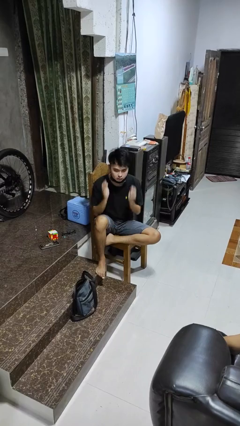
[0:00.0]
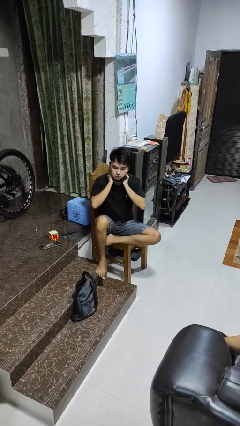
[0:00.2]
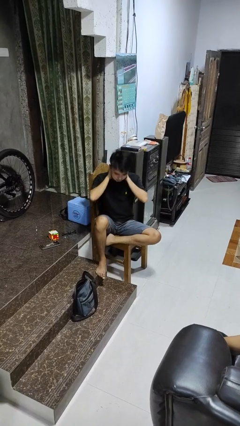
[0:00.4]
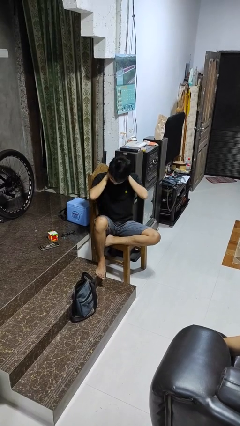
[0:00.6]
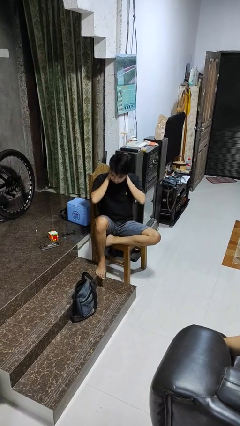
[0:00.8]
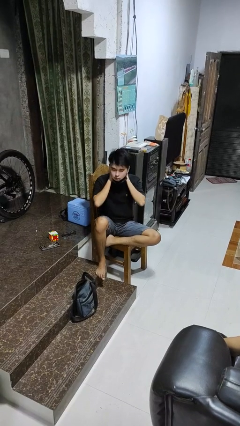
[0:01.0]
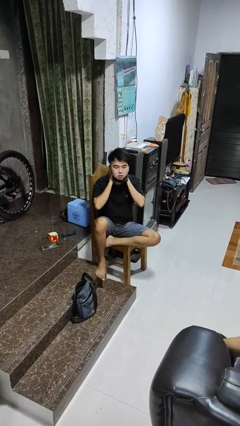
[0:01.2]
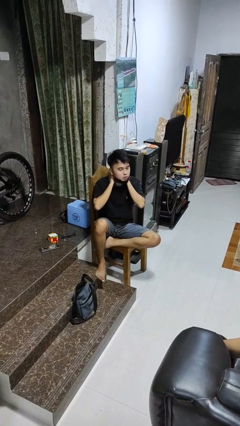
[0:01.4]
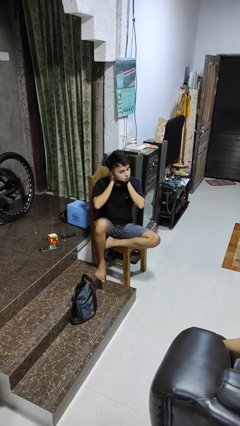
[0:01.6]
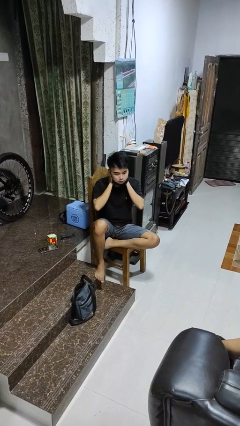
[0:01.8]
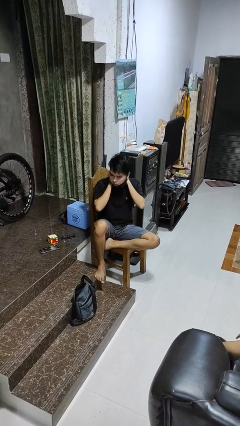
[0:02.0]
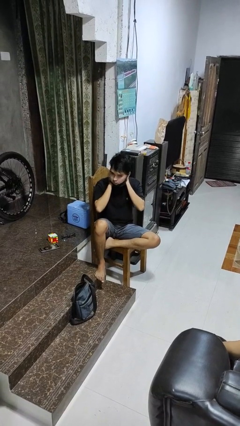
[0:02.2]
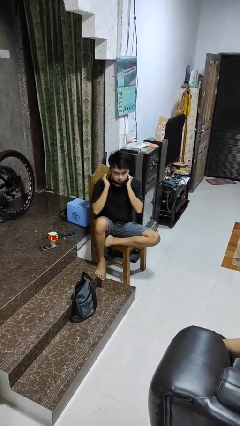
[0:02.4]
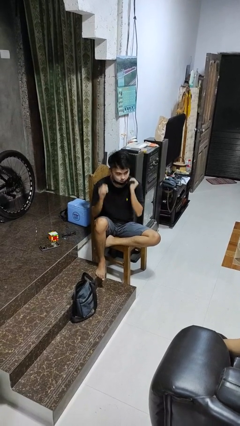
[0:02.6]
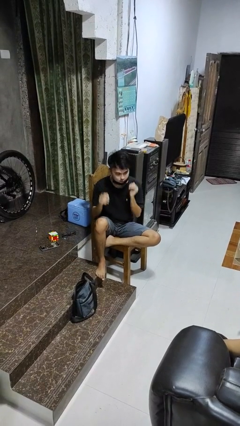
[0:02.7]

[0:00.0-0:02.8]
person rubs neck

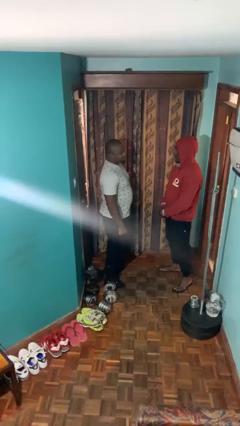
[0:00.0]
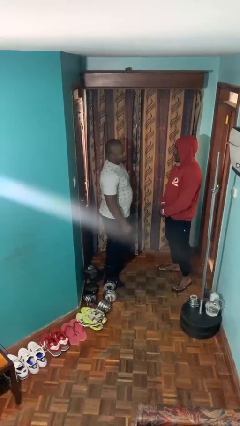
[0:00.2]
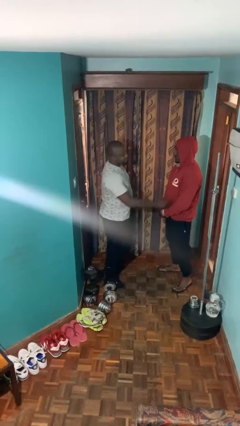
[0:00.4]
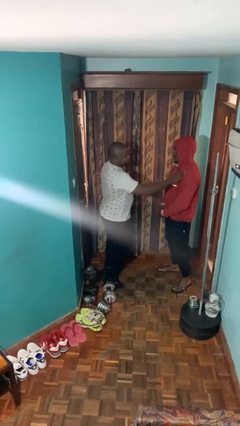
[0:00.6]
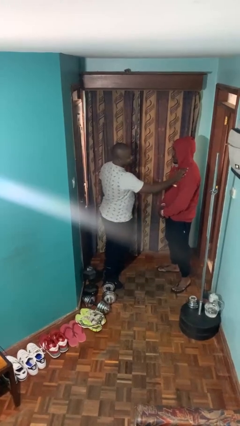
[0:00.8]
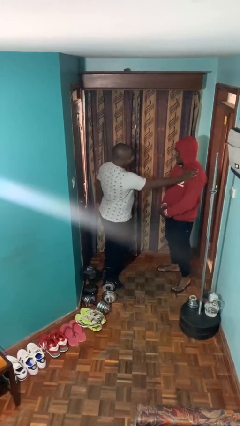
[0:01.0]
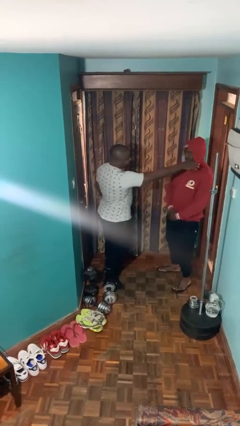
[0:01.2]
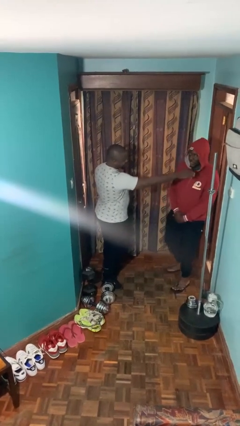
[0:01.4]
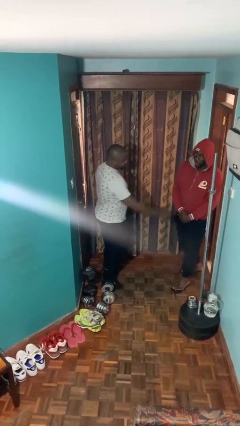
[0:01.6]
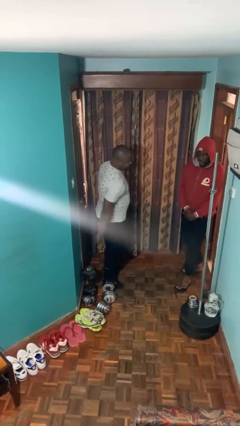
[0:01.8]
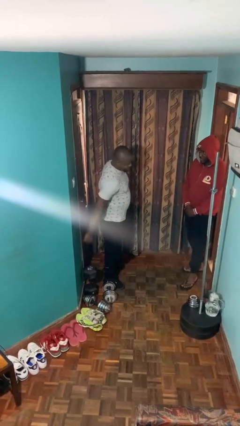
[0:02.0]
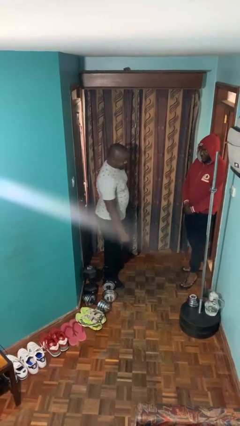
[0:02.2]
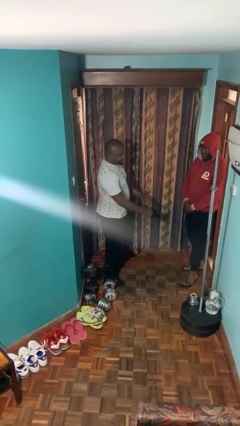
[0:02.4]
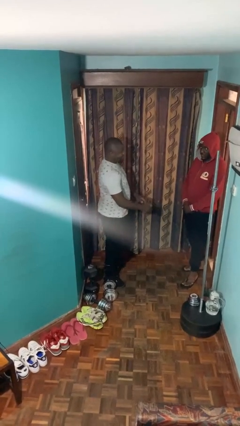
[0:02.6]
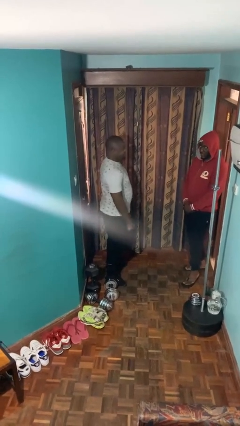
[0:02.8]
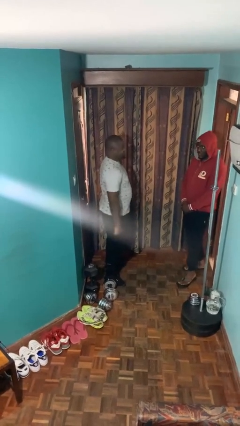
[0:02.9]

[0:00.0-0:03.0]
person shoves person

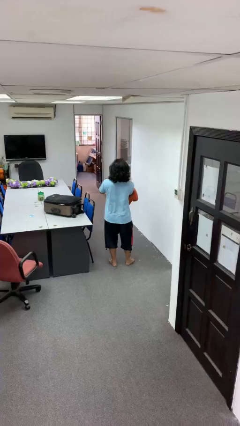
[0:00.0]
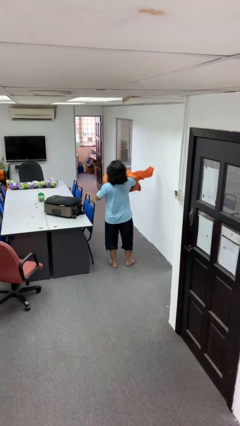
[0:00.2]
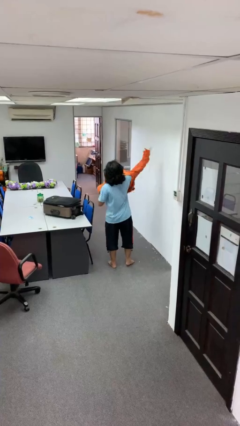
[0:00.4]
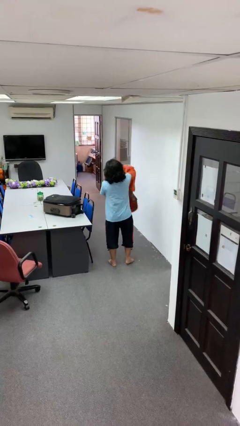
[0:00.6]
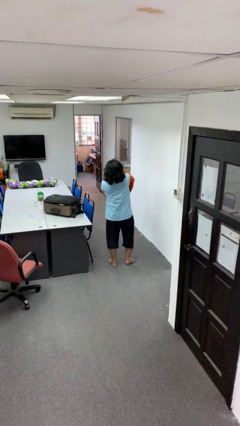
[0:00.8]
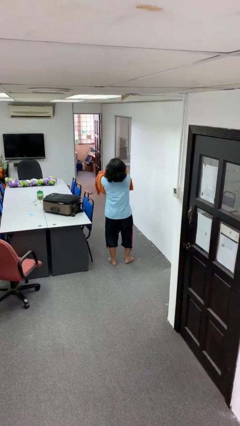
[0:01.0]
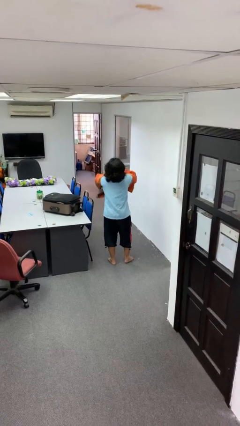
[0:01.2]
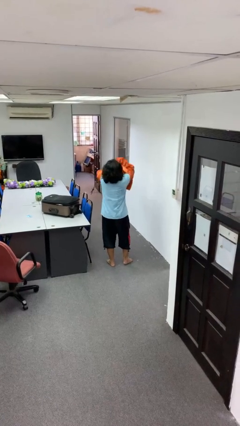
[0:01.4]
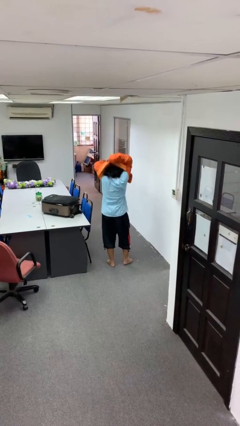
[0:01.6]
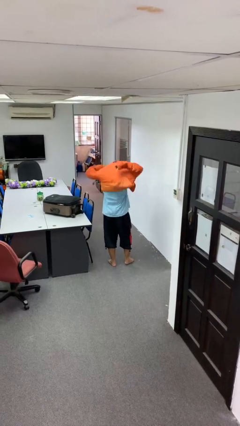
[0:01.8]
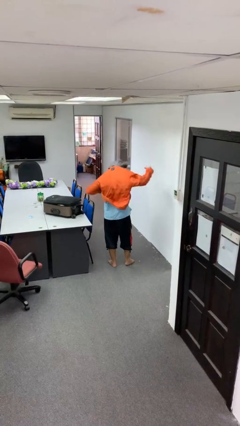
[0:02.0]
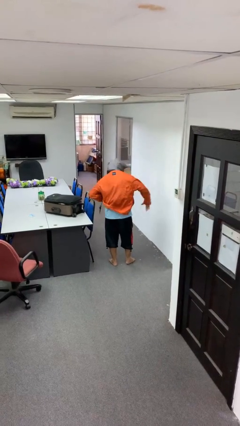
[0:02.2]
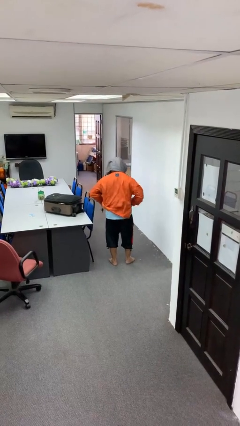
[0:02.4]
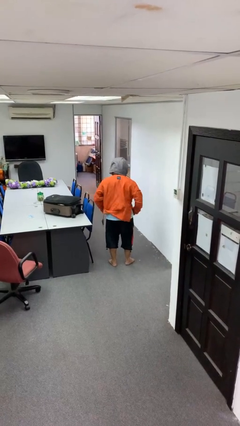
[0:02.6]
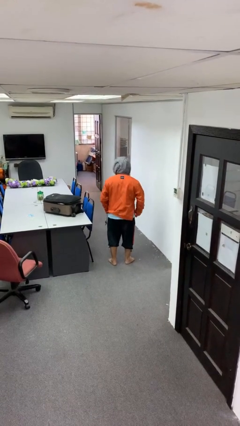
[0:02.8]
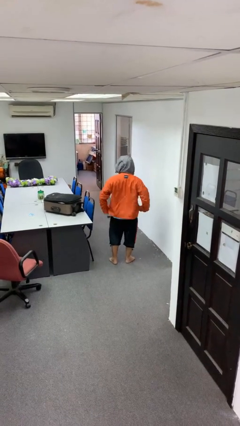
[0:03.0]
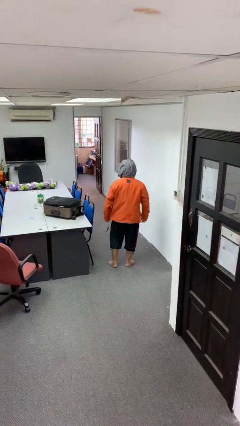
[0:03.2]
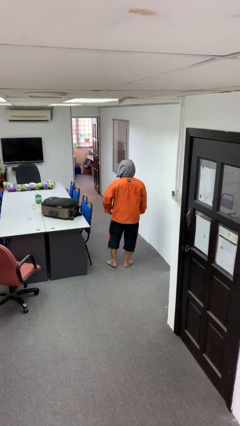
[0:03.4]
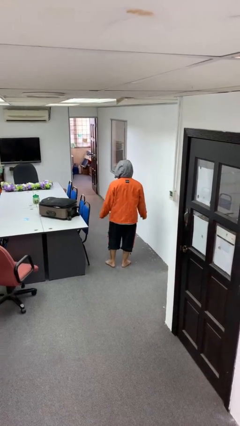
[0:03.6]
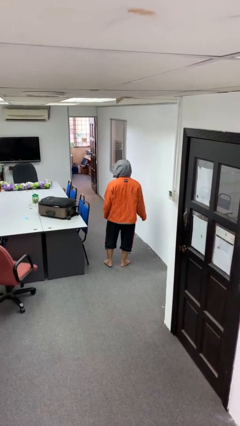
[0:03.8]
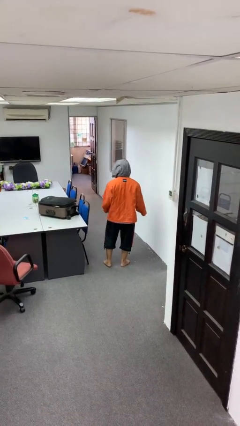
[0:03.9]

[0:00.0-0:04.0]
person puts on hoodie

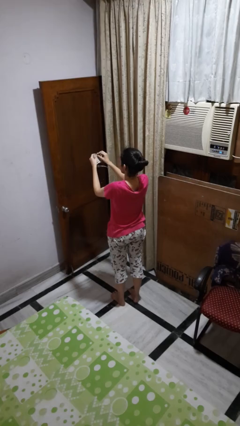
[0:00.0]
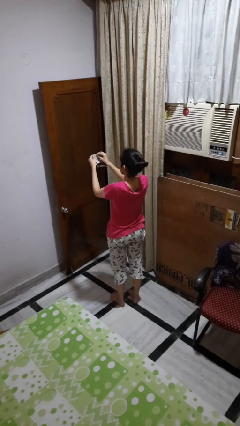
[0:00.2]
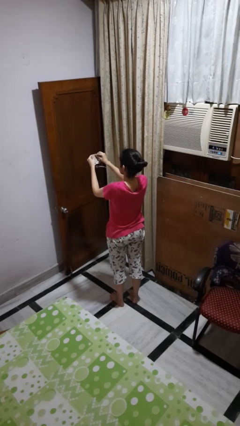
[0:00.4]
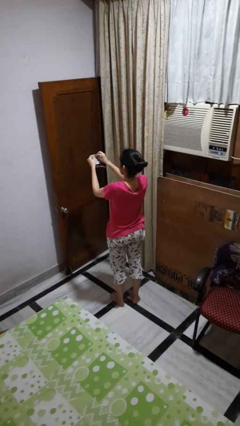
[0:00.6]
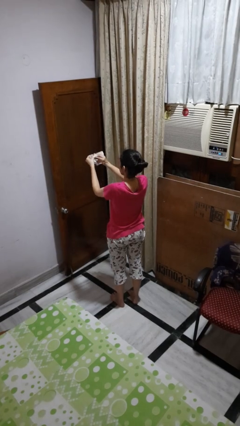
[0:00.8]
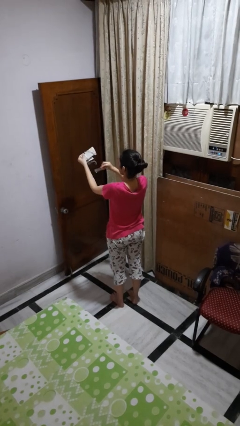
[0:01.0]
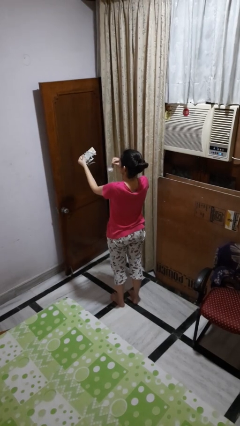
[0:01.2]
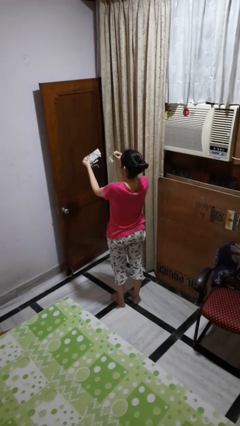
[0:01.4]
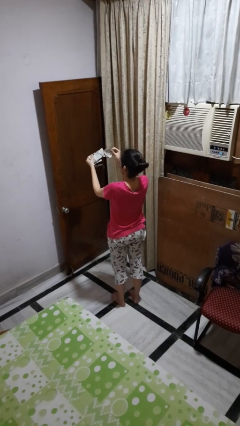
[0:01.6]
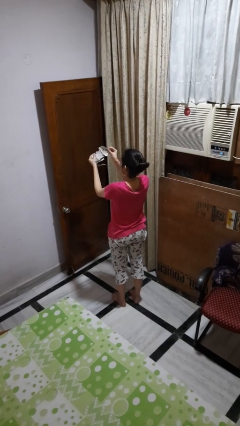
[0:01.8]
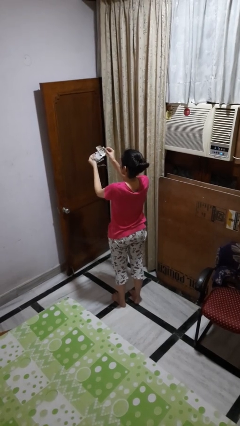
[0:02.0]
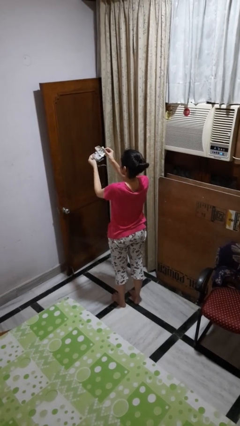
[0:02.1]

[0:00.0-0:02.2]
person tears paper

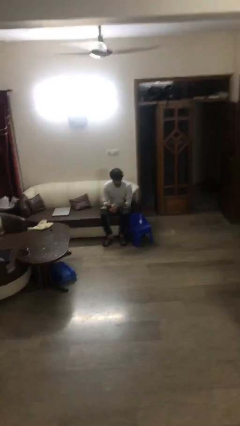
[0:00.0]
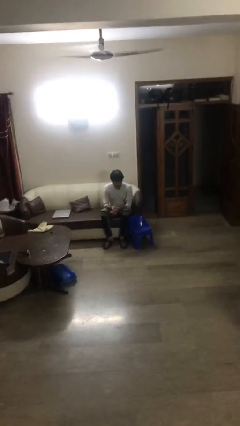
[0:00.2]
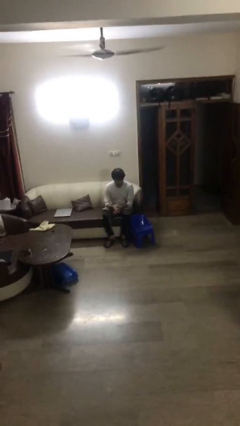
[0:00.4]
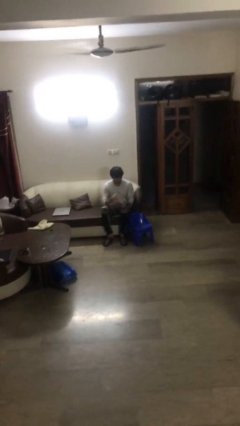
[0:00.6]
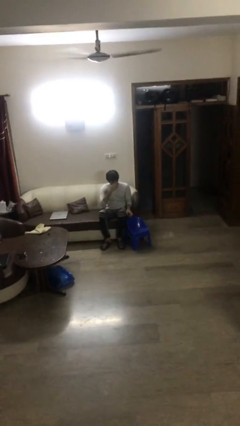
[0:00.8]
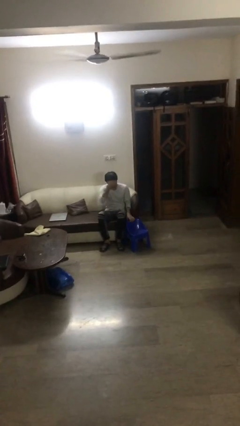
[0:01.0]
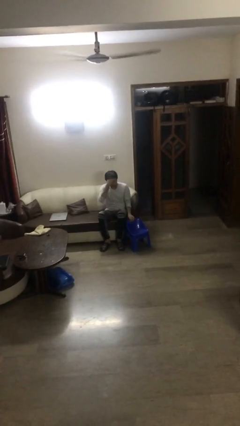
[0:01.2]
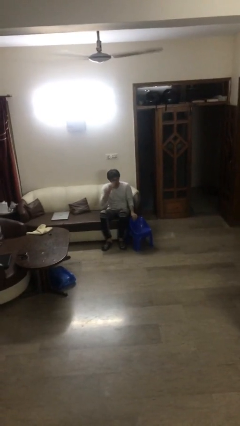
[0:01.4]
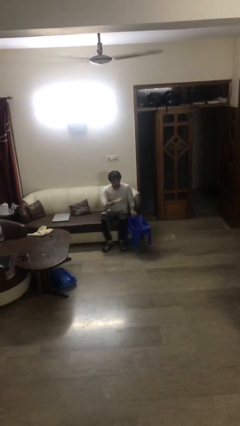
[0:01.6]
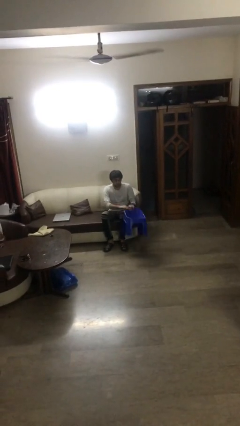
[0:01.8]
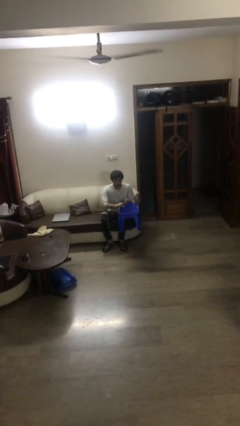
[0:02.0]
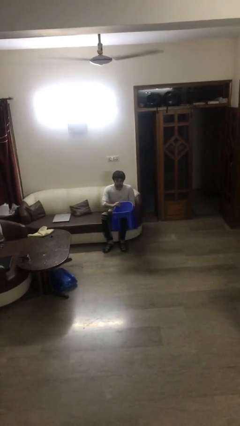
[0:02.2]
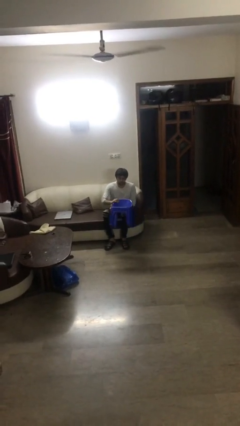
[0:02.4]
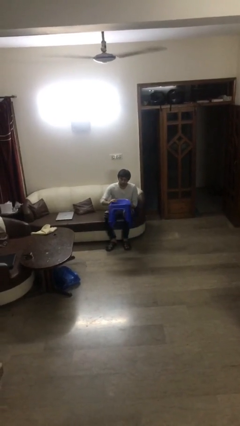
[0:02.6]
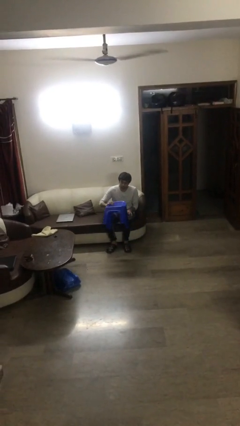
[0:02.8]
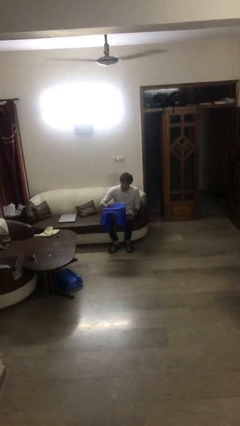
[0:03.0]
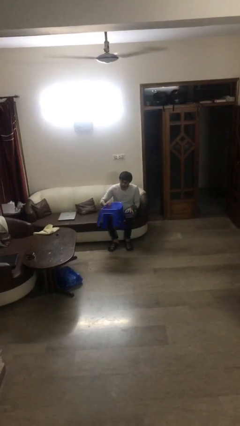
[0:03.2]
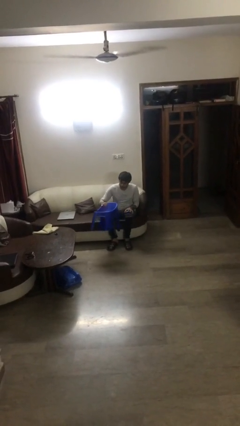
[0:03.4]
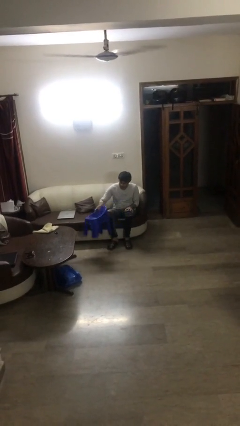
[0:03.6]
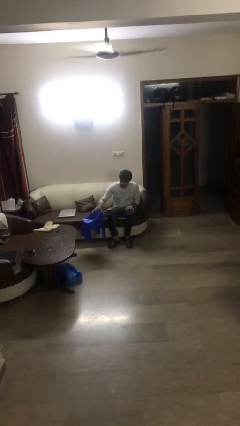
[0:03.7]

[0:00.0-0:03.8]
person picks up object from floor

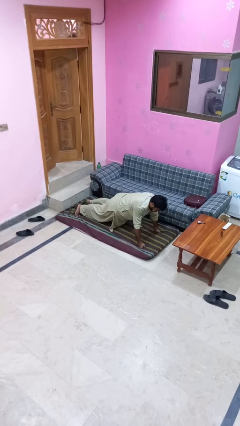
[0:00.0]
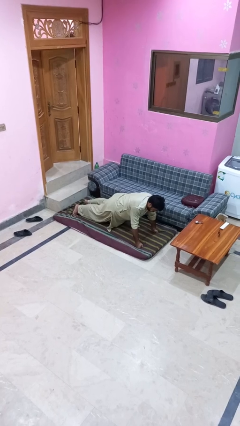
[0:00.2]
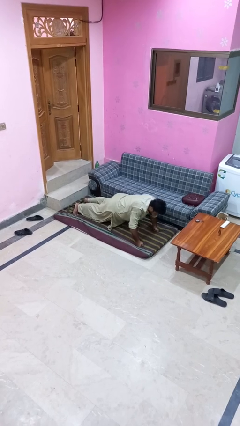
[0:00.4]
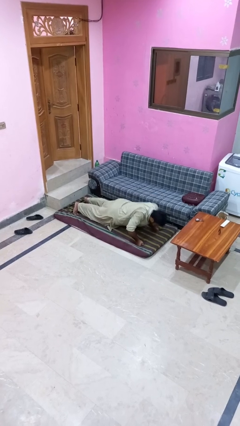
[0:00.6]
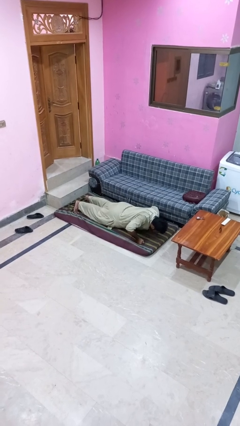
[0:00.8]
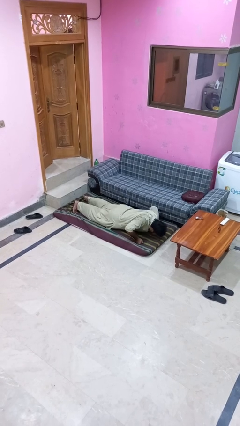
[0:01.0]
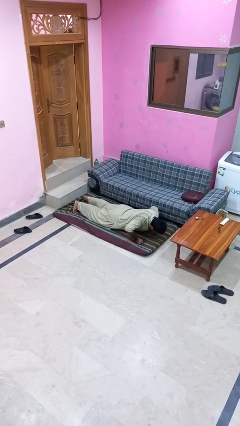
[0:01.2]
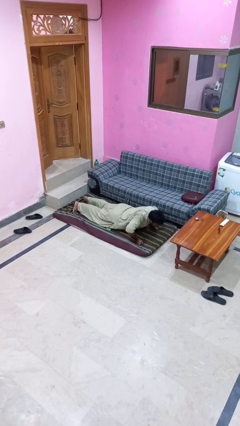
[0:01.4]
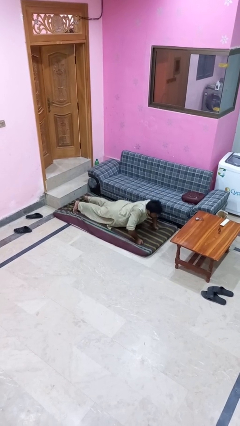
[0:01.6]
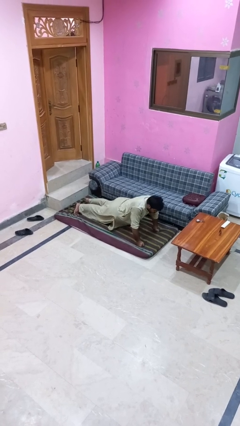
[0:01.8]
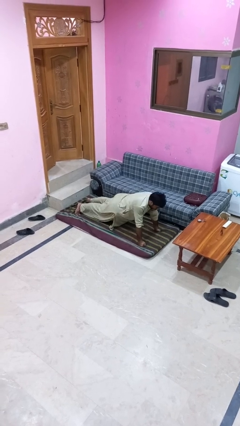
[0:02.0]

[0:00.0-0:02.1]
person exercises with pushup
